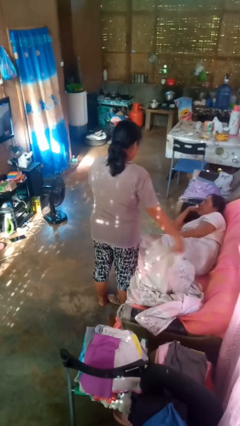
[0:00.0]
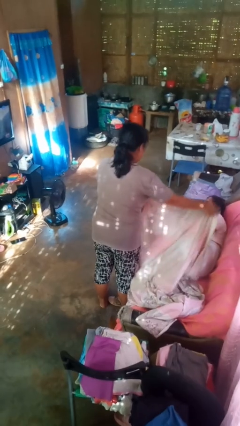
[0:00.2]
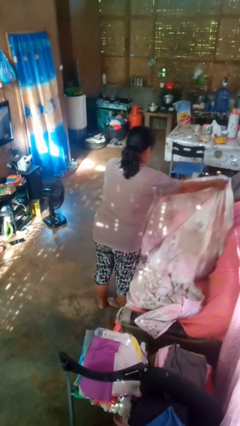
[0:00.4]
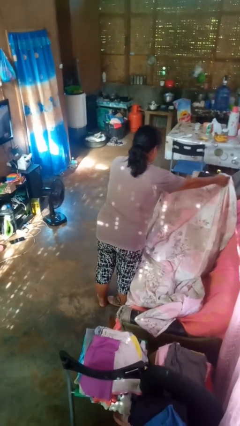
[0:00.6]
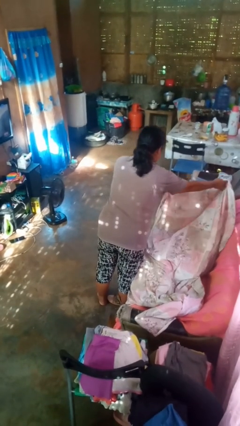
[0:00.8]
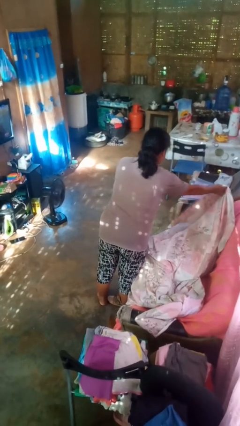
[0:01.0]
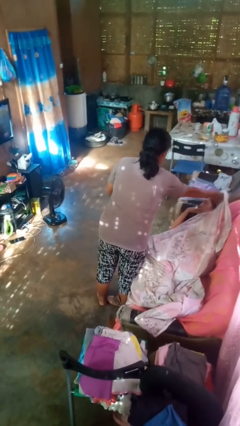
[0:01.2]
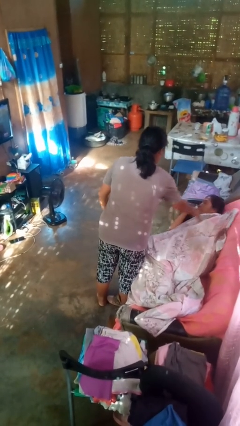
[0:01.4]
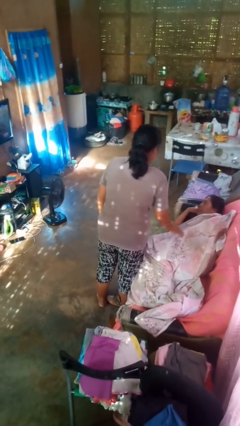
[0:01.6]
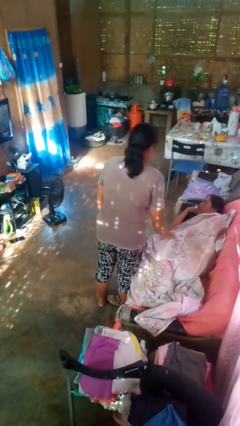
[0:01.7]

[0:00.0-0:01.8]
person covers friend with blanket

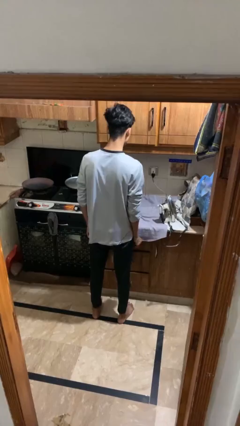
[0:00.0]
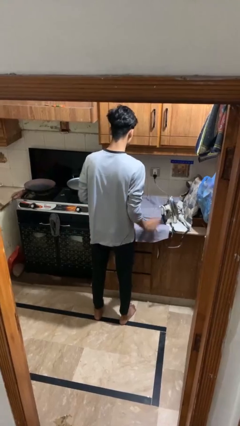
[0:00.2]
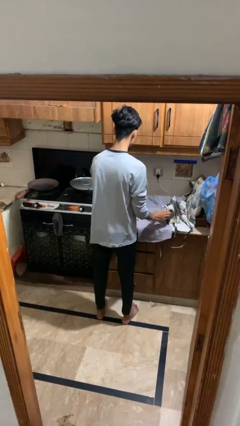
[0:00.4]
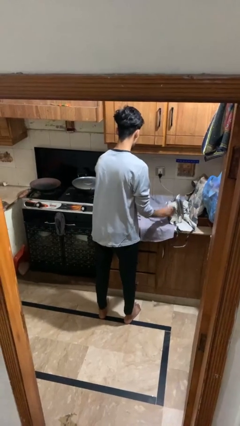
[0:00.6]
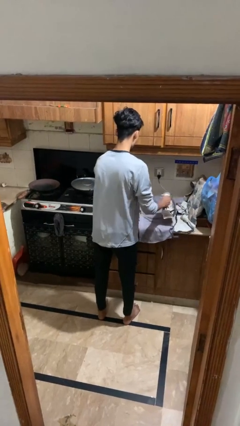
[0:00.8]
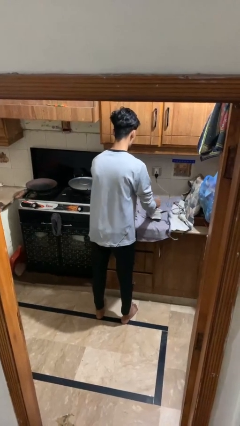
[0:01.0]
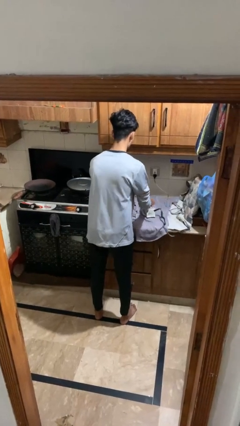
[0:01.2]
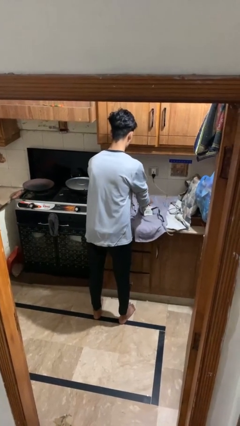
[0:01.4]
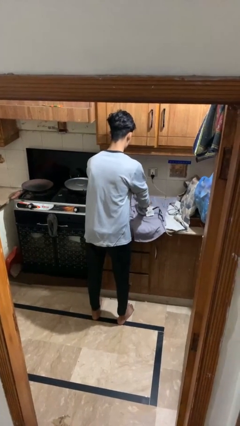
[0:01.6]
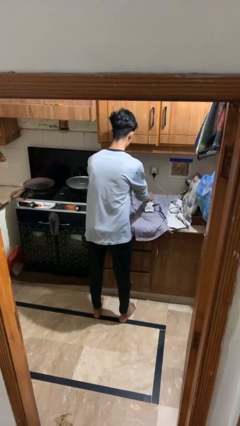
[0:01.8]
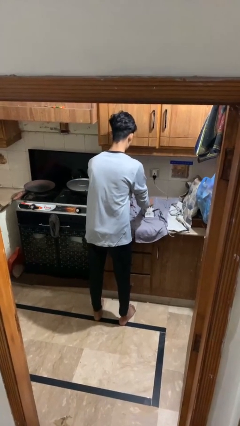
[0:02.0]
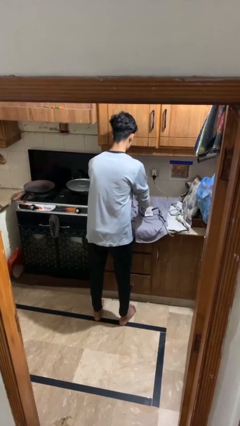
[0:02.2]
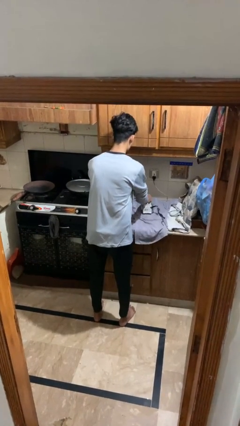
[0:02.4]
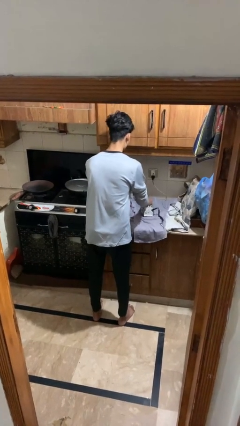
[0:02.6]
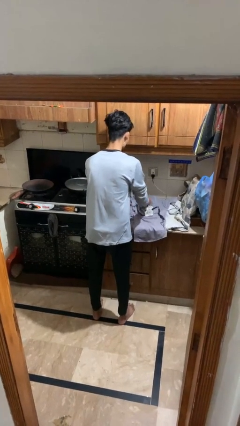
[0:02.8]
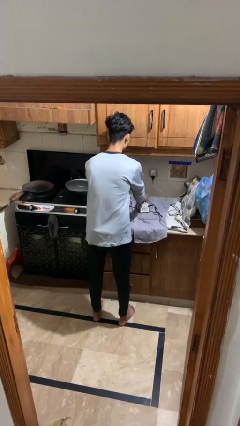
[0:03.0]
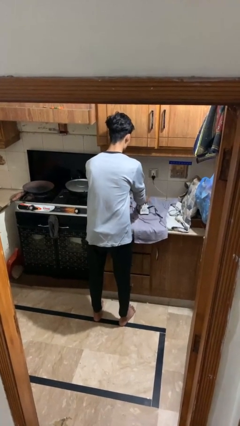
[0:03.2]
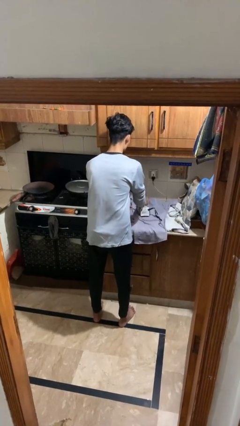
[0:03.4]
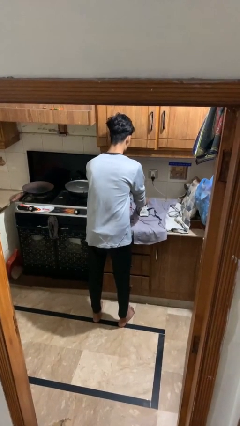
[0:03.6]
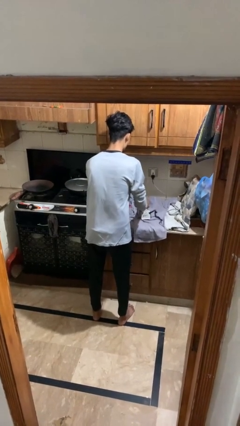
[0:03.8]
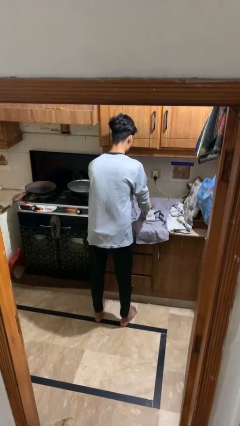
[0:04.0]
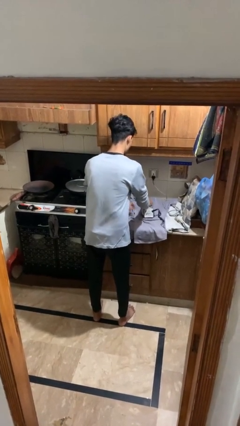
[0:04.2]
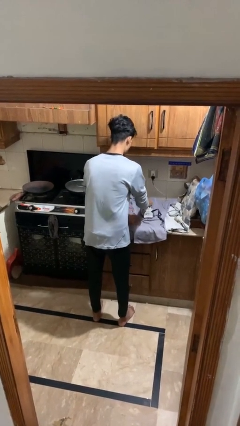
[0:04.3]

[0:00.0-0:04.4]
person irons clothes

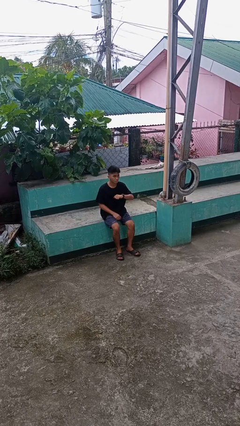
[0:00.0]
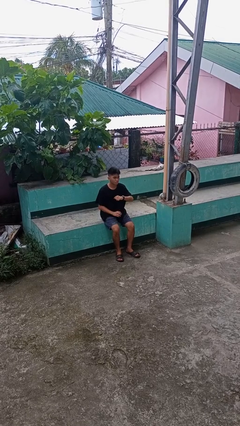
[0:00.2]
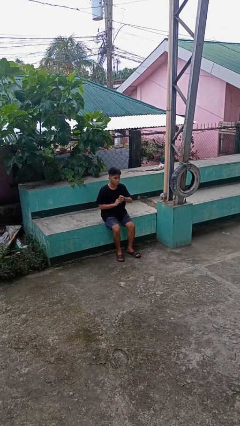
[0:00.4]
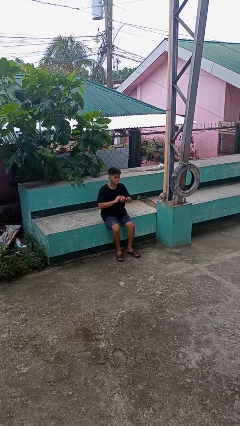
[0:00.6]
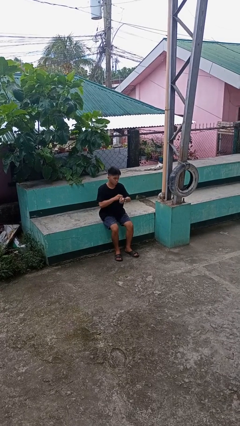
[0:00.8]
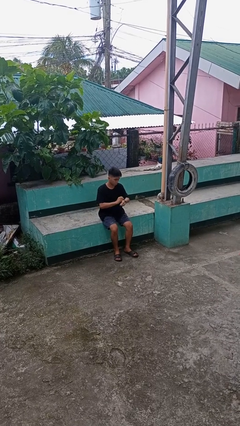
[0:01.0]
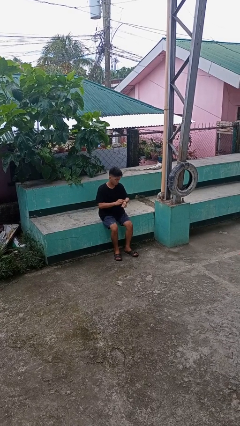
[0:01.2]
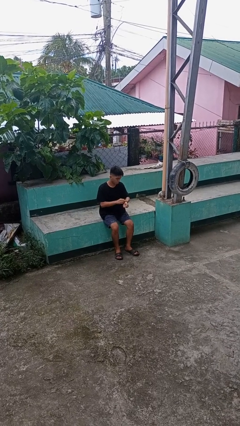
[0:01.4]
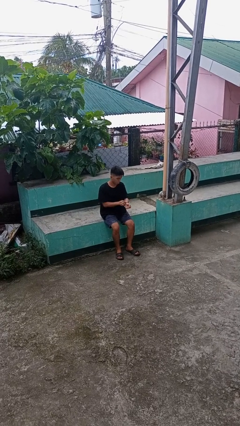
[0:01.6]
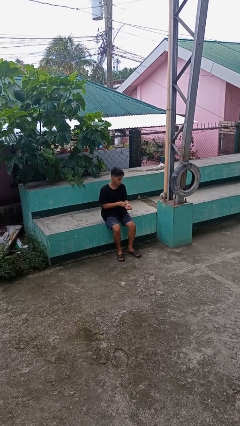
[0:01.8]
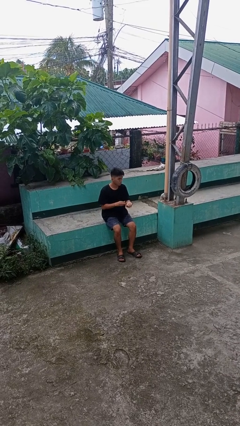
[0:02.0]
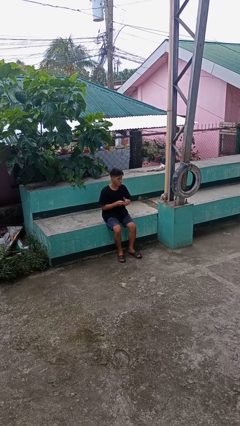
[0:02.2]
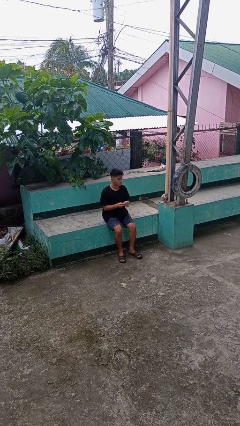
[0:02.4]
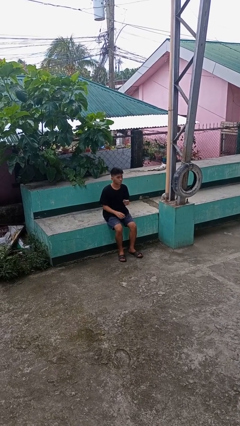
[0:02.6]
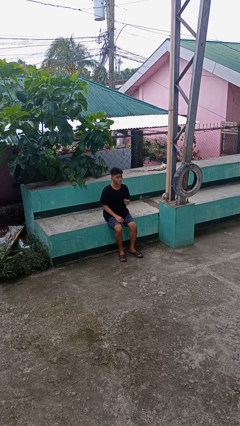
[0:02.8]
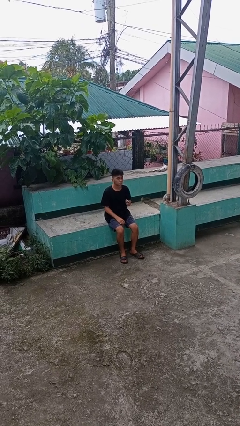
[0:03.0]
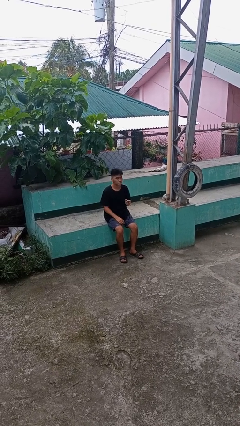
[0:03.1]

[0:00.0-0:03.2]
person takes off wristwatch

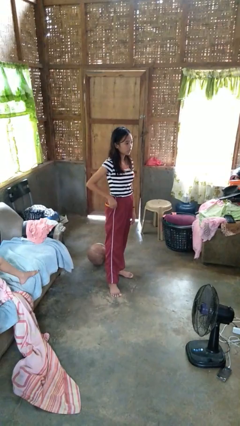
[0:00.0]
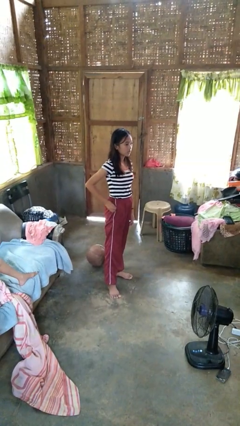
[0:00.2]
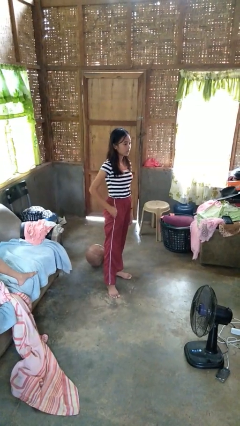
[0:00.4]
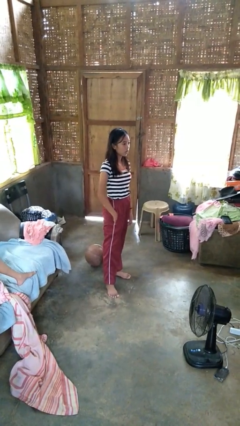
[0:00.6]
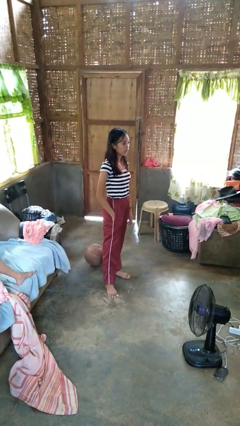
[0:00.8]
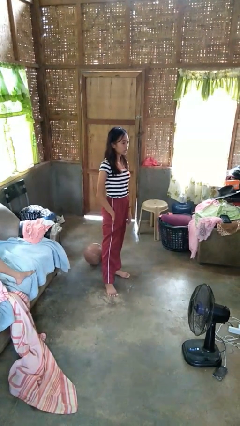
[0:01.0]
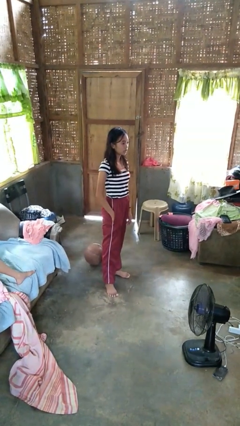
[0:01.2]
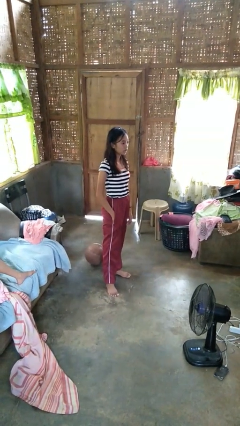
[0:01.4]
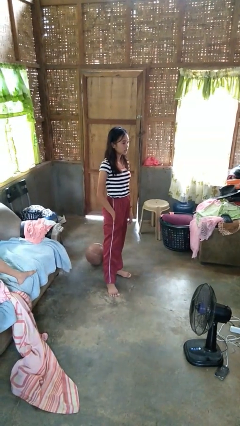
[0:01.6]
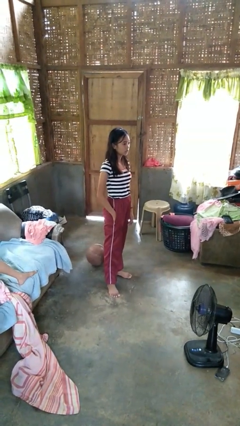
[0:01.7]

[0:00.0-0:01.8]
person puts hands in back pockets

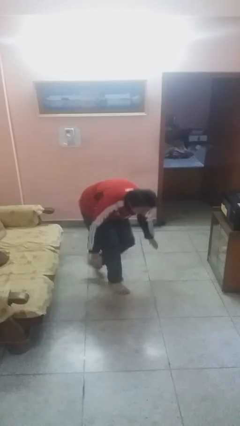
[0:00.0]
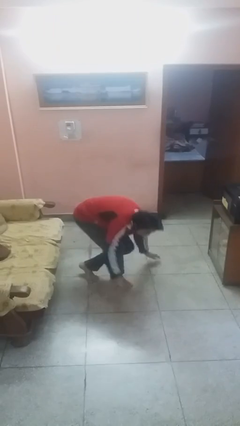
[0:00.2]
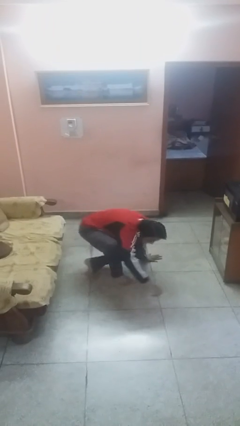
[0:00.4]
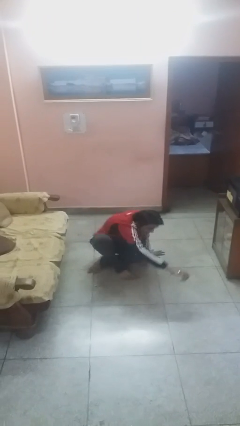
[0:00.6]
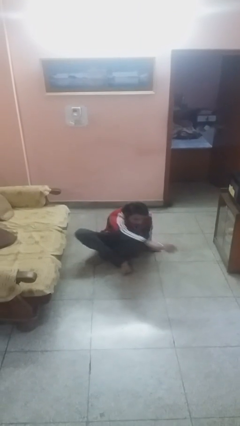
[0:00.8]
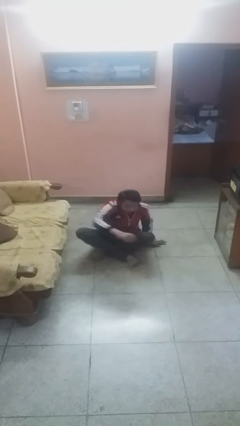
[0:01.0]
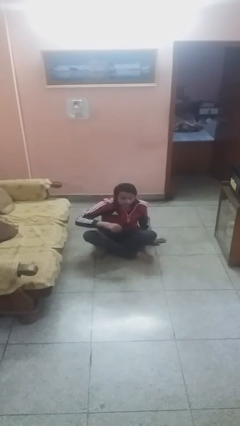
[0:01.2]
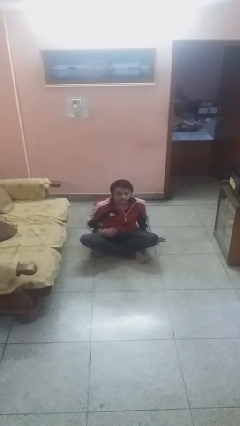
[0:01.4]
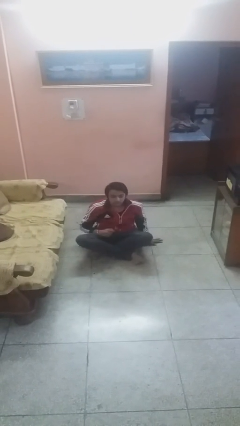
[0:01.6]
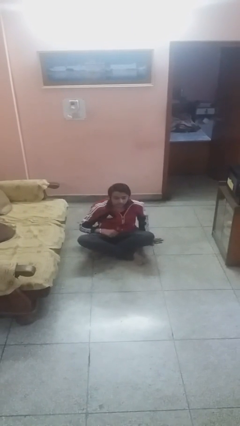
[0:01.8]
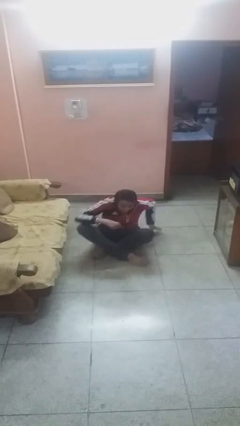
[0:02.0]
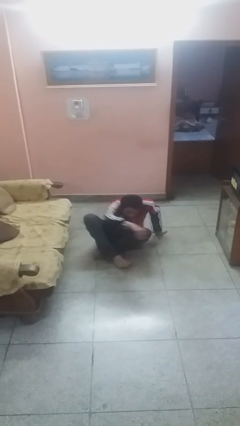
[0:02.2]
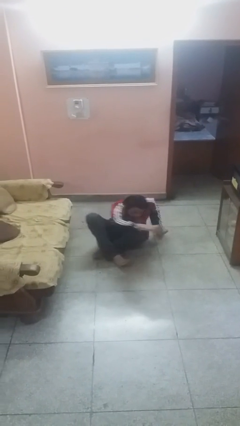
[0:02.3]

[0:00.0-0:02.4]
person sits down

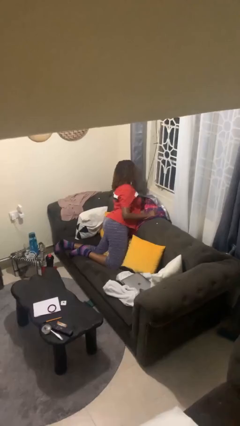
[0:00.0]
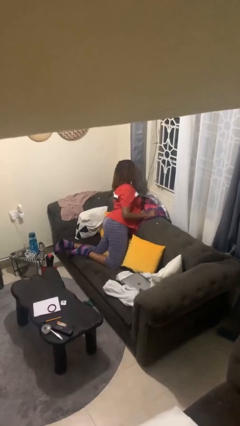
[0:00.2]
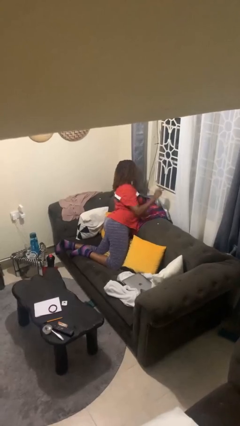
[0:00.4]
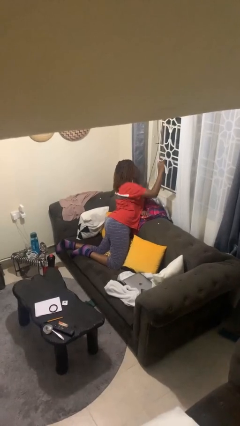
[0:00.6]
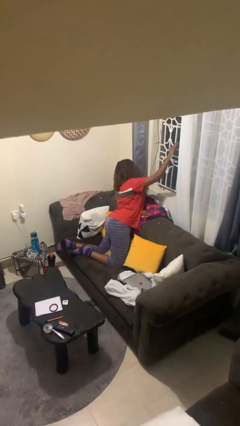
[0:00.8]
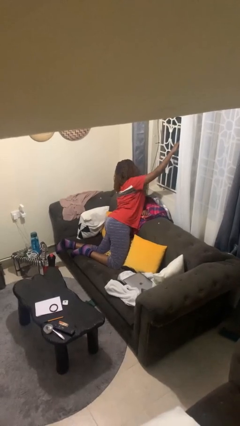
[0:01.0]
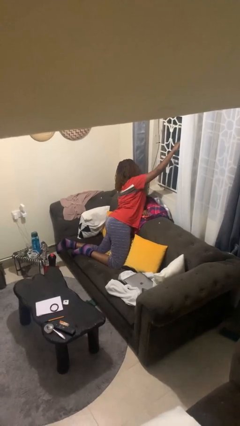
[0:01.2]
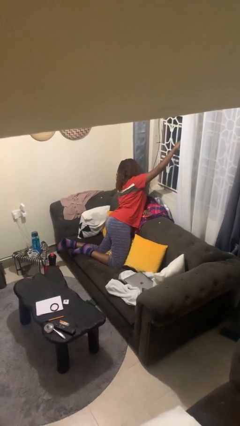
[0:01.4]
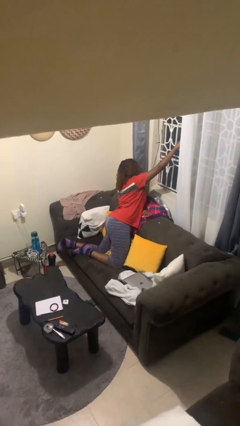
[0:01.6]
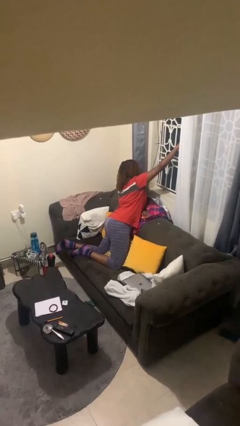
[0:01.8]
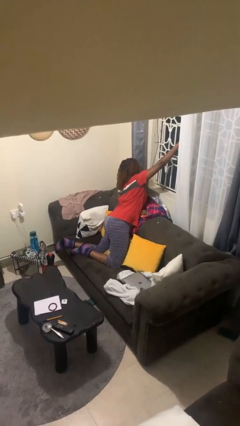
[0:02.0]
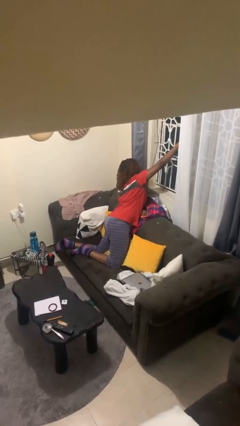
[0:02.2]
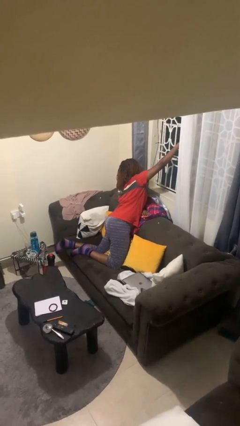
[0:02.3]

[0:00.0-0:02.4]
person opens home window

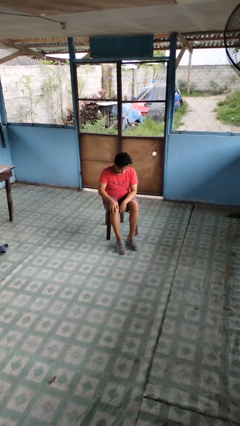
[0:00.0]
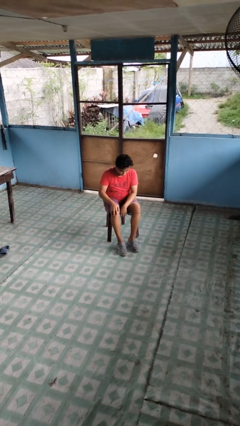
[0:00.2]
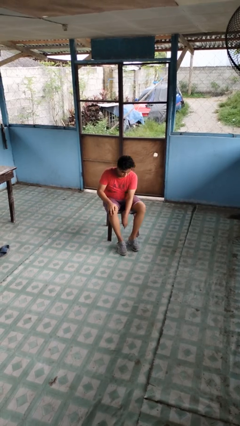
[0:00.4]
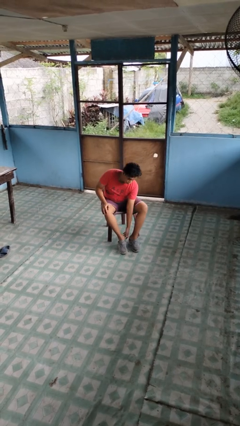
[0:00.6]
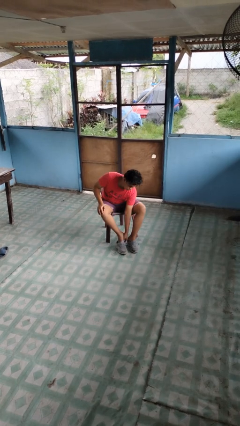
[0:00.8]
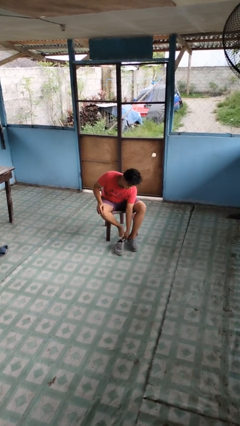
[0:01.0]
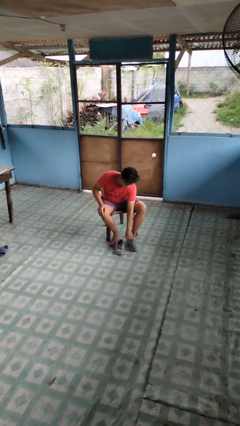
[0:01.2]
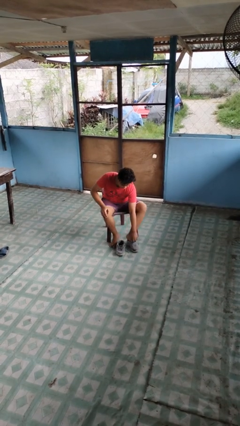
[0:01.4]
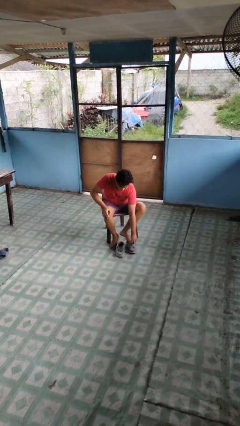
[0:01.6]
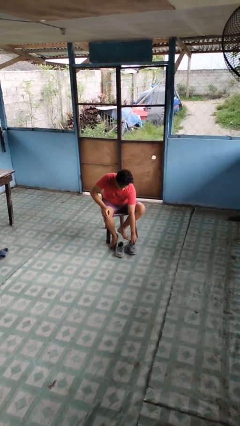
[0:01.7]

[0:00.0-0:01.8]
person takes off shoes
